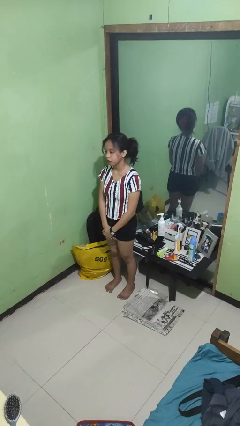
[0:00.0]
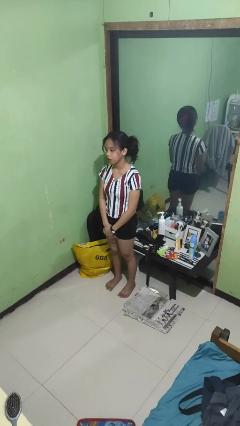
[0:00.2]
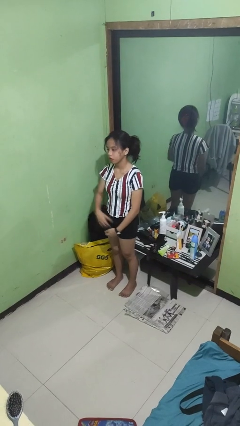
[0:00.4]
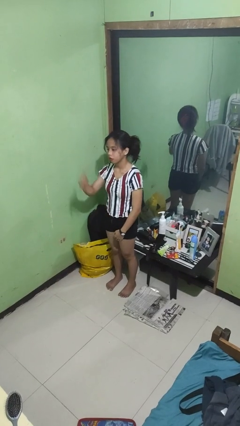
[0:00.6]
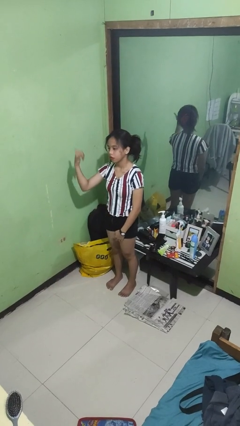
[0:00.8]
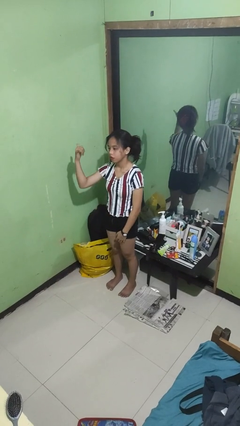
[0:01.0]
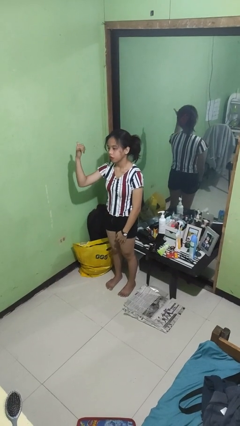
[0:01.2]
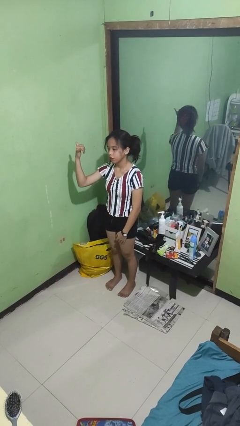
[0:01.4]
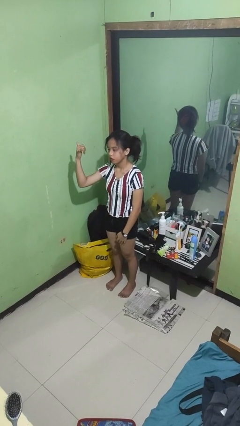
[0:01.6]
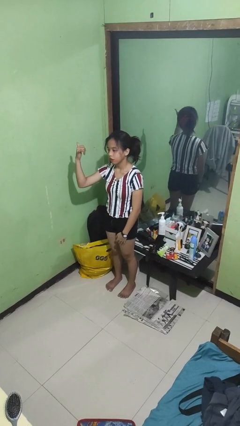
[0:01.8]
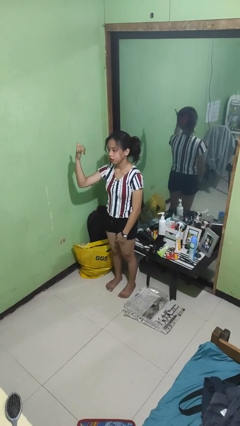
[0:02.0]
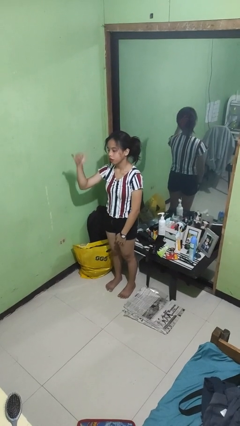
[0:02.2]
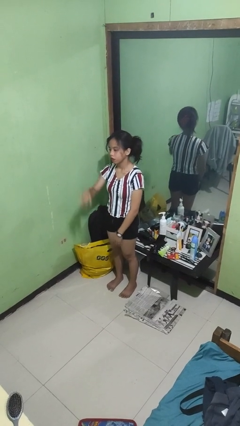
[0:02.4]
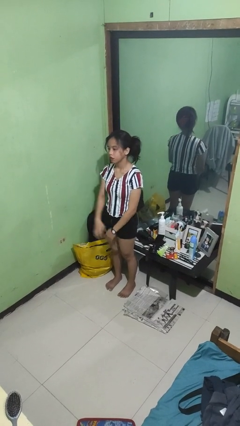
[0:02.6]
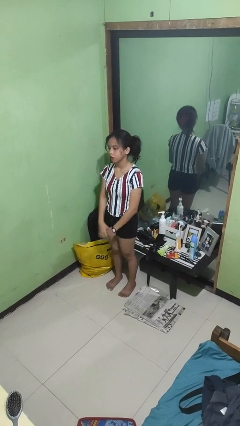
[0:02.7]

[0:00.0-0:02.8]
person gestures hang loose

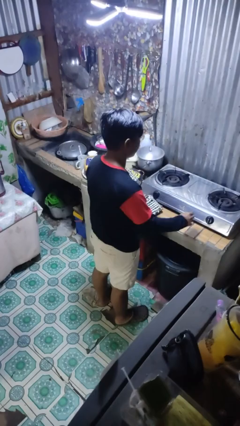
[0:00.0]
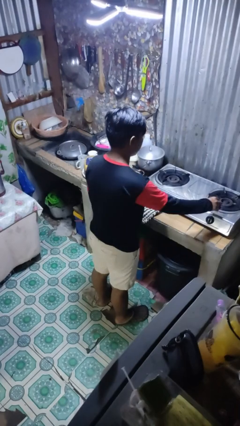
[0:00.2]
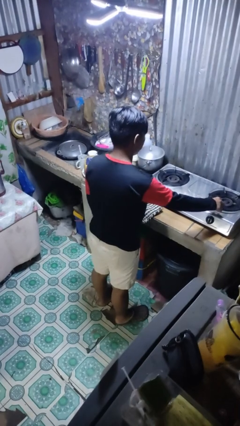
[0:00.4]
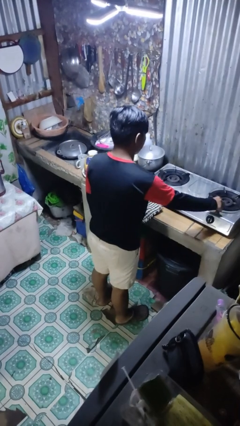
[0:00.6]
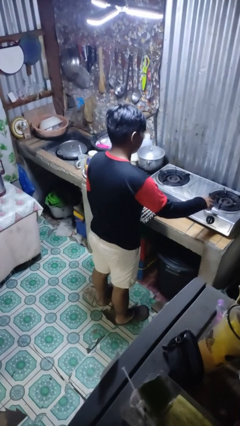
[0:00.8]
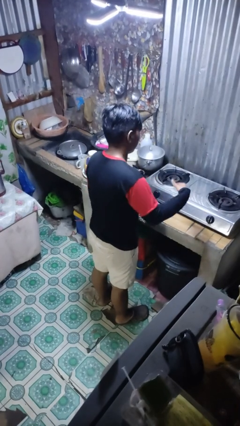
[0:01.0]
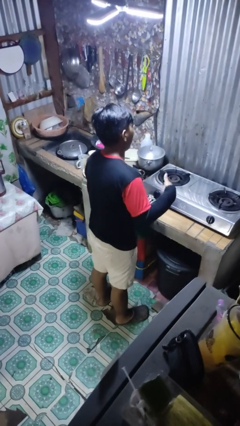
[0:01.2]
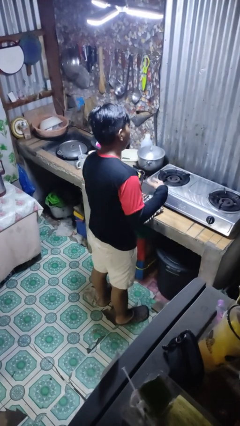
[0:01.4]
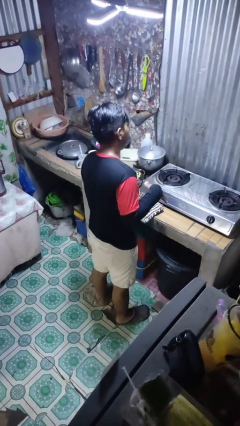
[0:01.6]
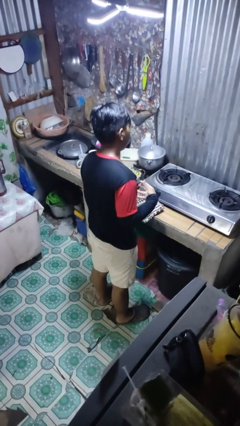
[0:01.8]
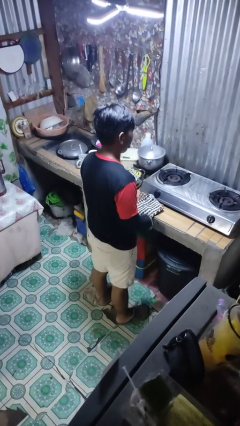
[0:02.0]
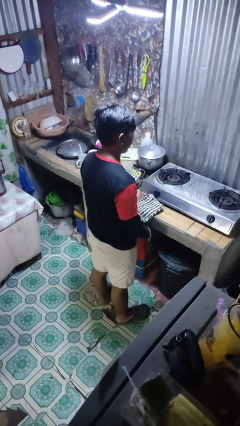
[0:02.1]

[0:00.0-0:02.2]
person burns hand

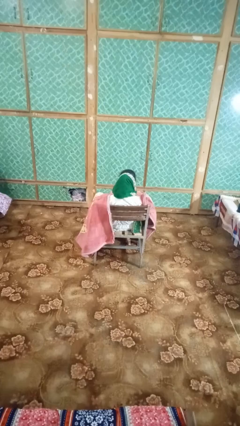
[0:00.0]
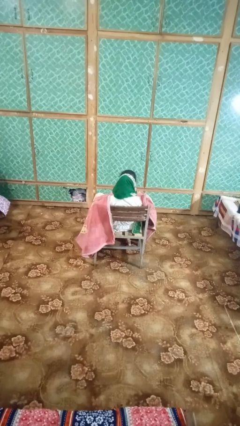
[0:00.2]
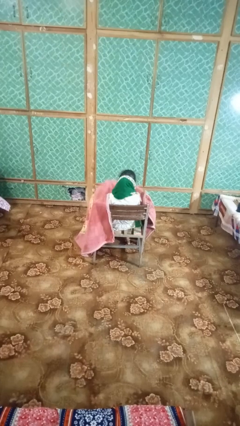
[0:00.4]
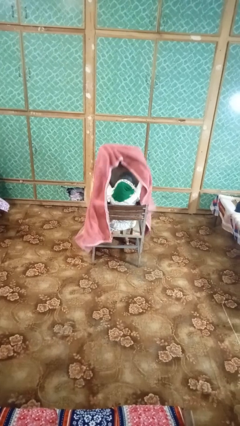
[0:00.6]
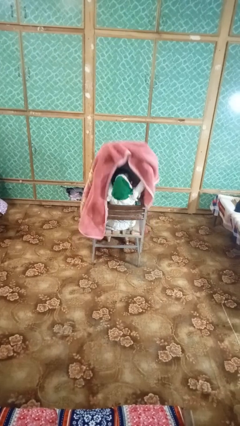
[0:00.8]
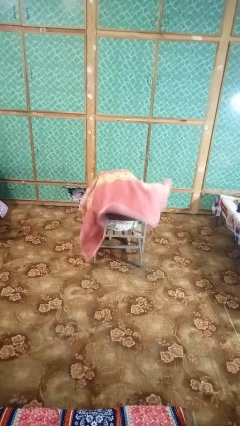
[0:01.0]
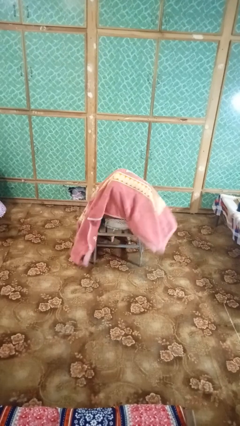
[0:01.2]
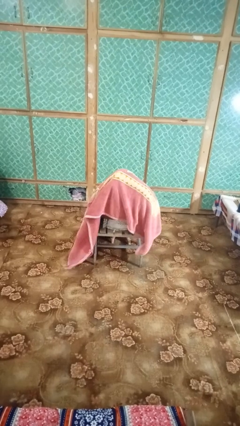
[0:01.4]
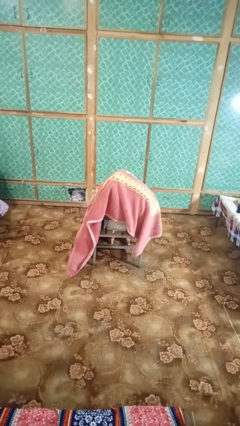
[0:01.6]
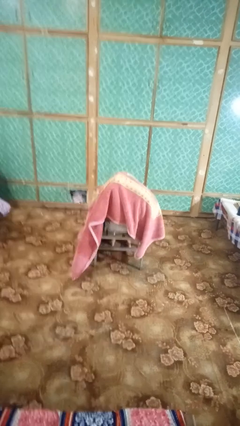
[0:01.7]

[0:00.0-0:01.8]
person covers with blanket

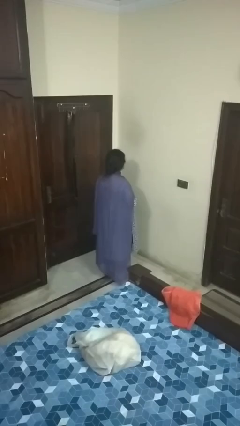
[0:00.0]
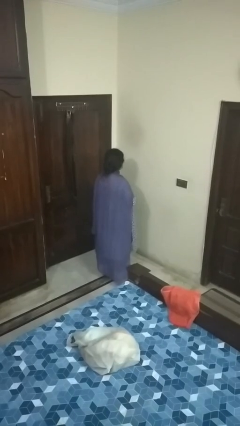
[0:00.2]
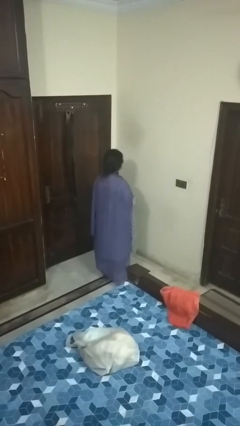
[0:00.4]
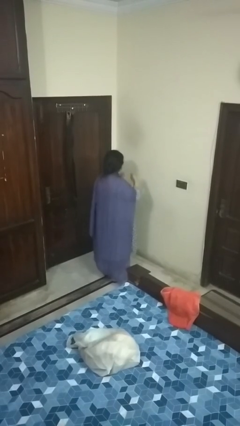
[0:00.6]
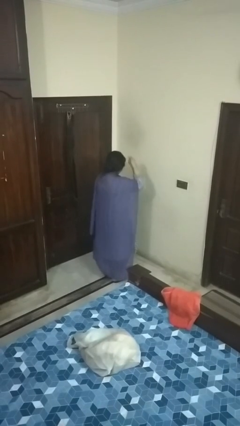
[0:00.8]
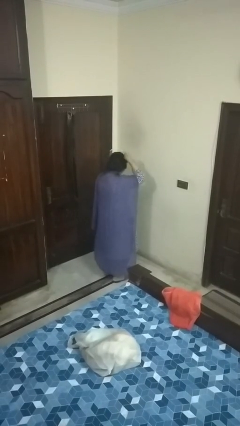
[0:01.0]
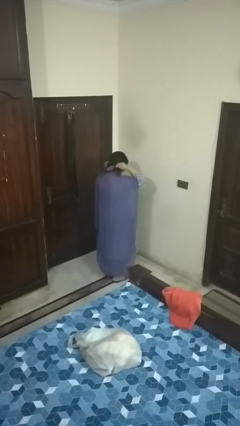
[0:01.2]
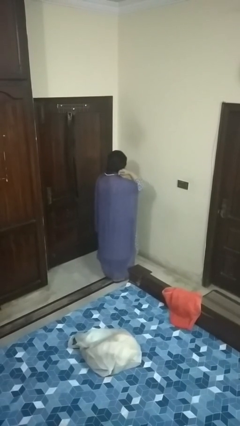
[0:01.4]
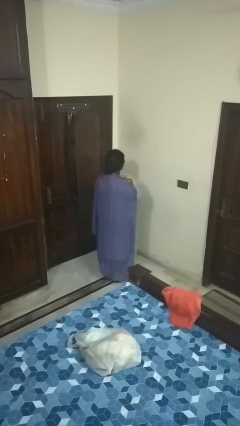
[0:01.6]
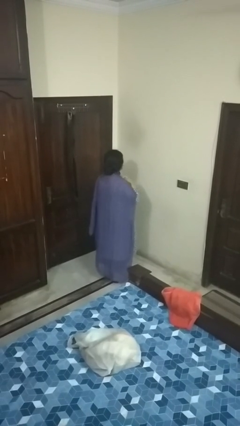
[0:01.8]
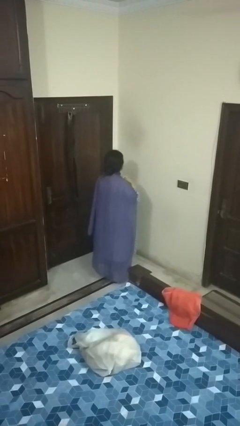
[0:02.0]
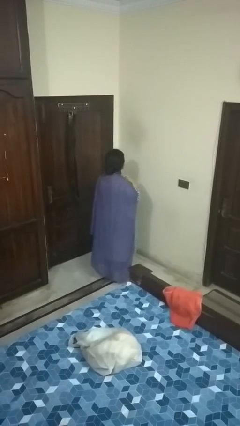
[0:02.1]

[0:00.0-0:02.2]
person puts on necklace

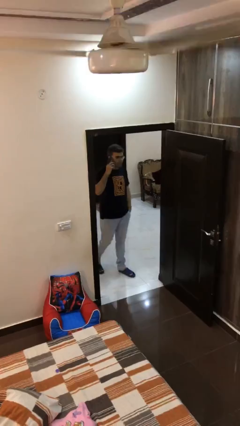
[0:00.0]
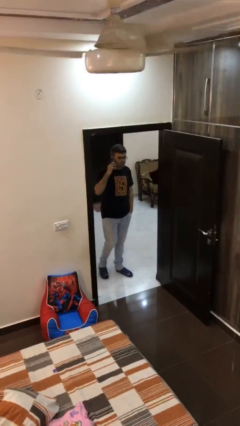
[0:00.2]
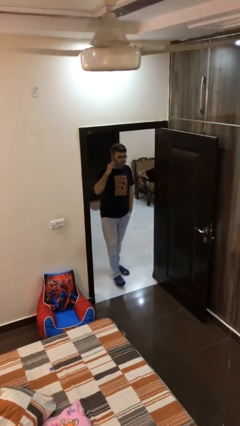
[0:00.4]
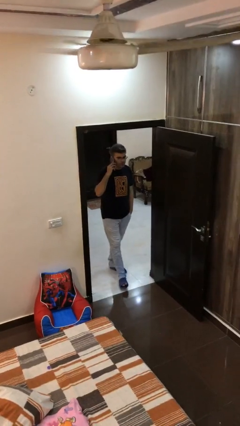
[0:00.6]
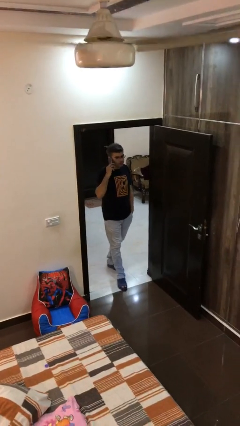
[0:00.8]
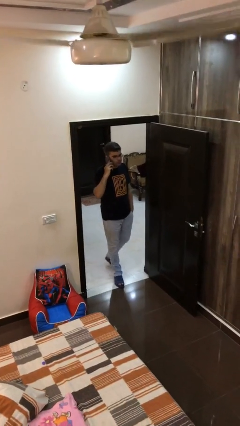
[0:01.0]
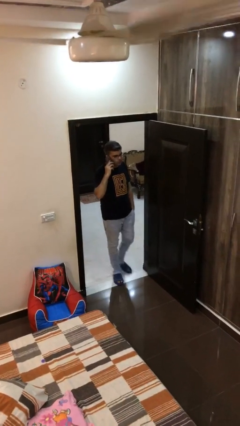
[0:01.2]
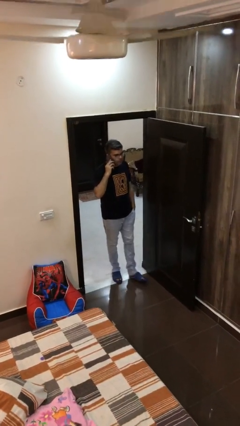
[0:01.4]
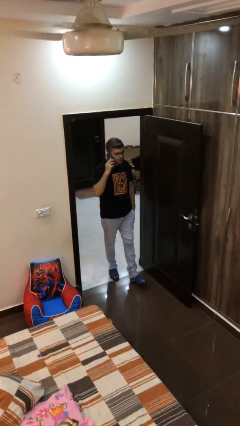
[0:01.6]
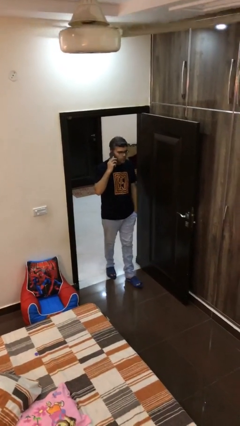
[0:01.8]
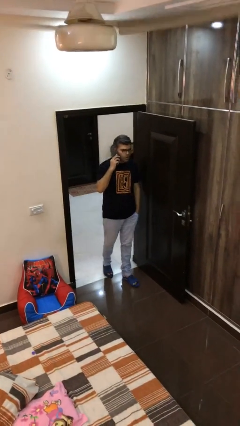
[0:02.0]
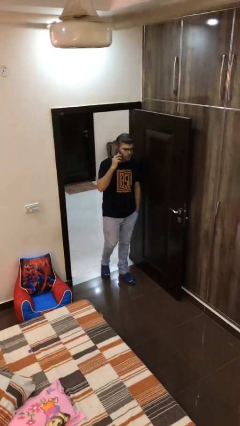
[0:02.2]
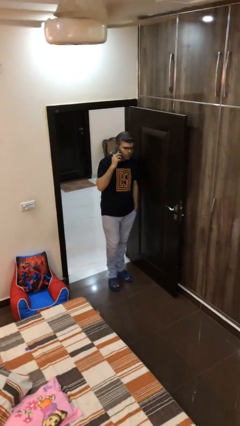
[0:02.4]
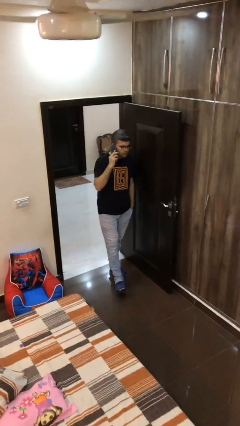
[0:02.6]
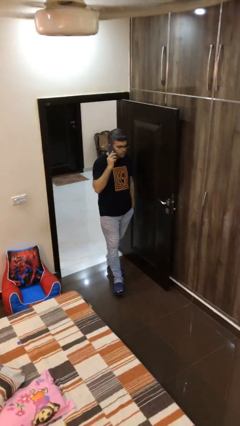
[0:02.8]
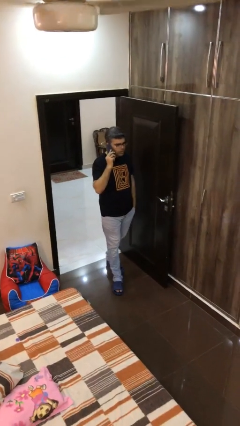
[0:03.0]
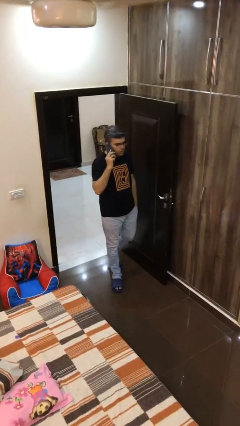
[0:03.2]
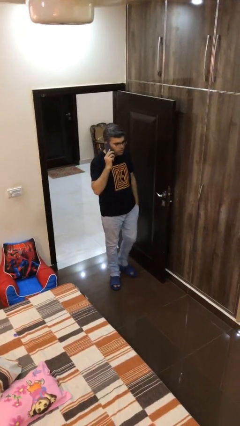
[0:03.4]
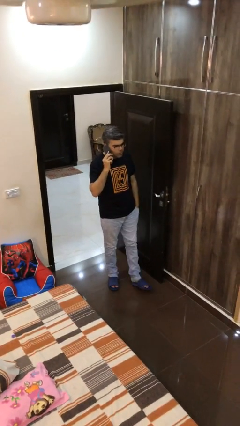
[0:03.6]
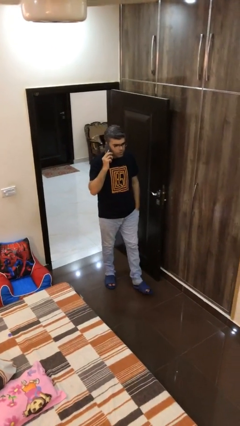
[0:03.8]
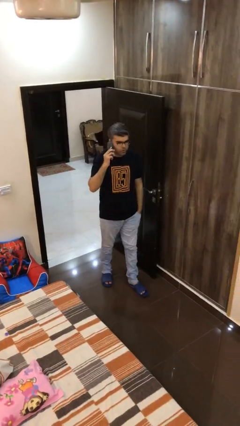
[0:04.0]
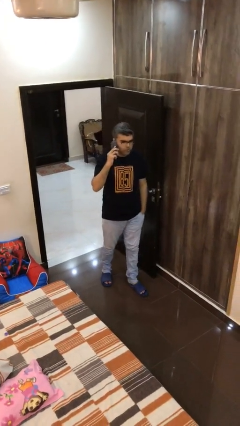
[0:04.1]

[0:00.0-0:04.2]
person enters scene through structure

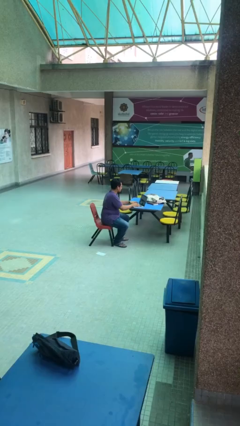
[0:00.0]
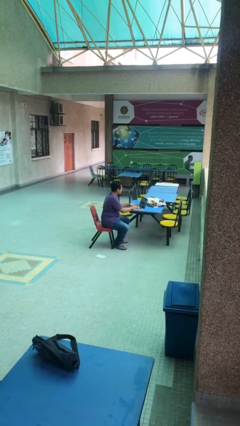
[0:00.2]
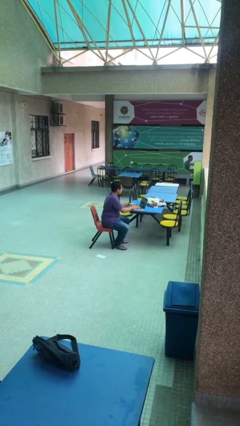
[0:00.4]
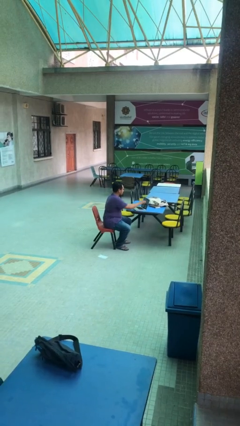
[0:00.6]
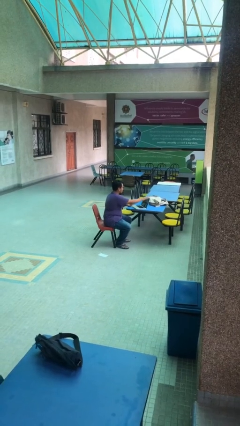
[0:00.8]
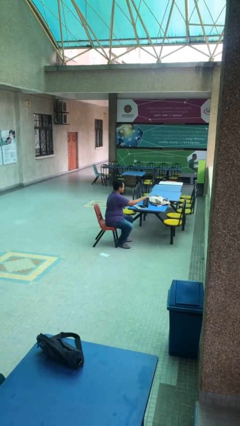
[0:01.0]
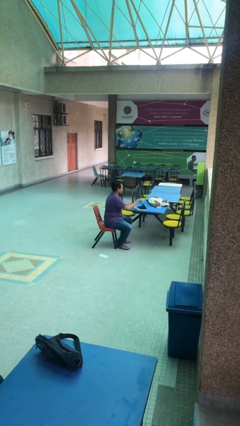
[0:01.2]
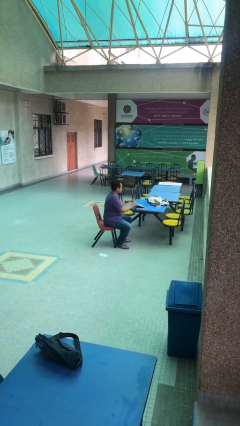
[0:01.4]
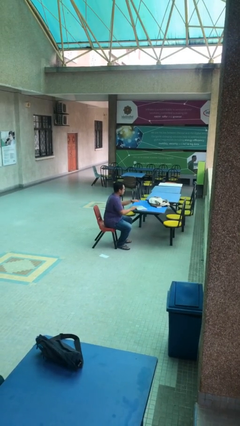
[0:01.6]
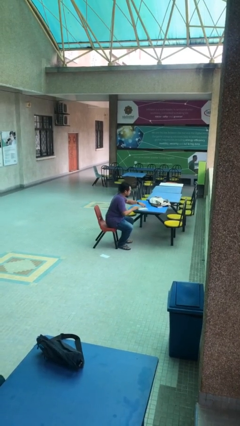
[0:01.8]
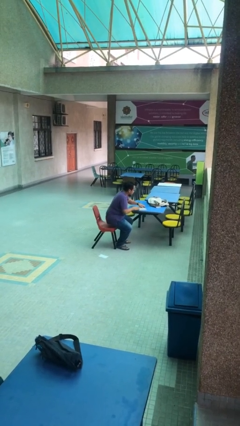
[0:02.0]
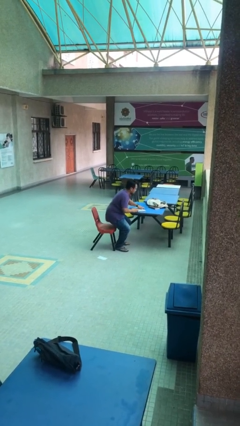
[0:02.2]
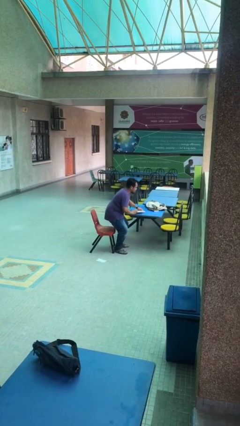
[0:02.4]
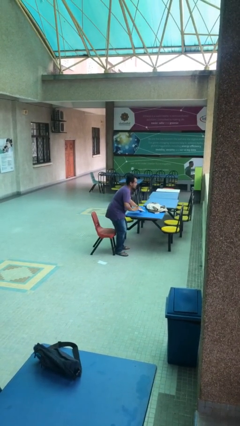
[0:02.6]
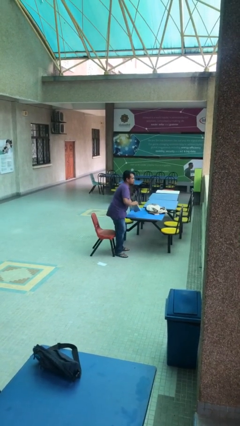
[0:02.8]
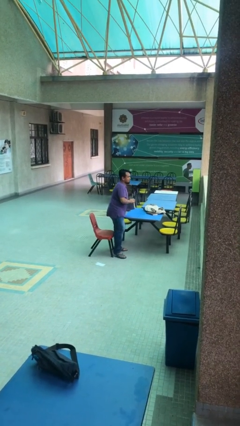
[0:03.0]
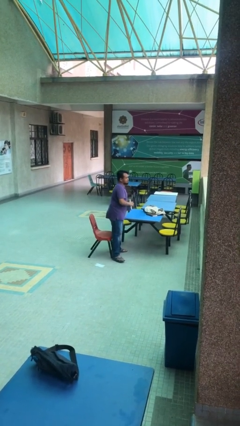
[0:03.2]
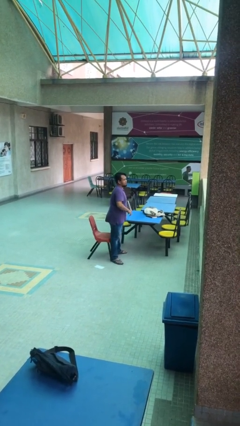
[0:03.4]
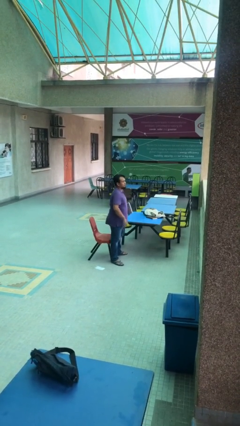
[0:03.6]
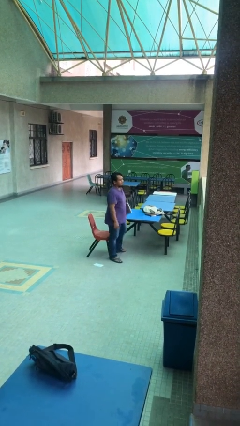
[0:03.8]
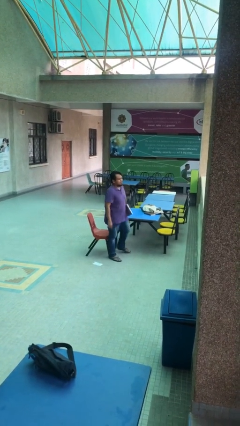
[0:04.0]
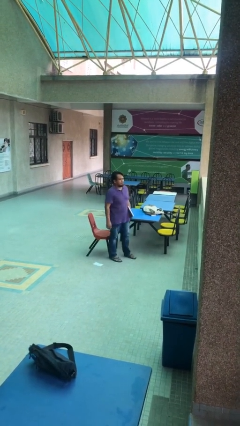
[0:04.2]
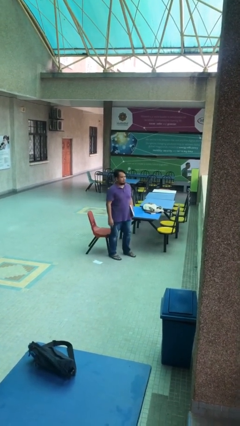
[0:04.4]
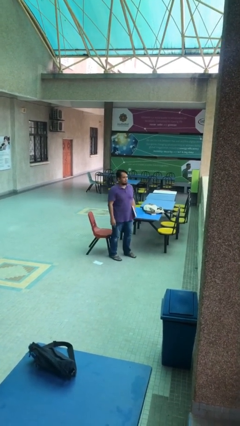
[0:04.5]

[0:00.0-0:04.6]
person stands up
